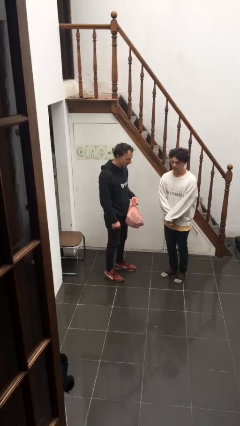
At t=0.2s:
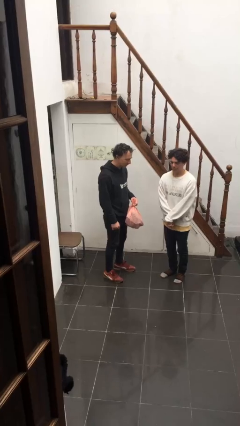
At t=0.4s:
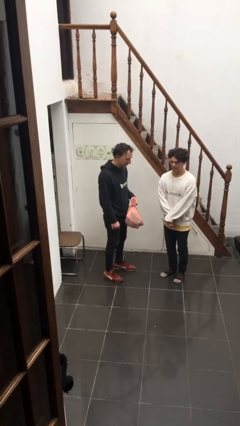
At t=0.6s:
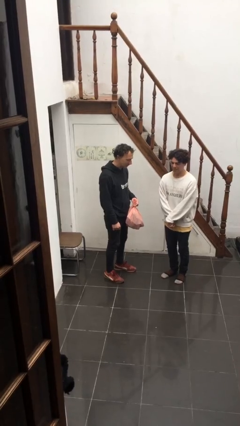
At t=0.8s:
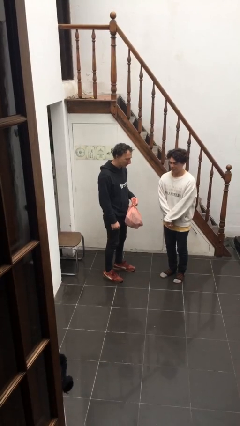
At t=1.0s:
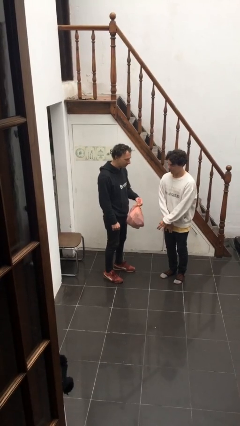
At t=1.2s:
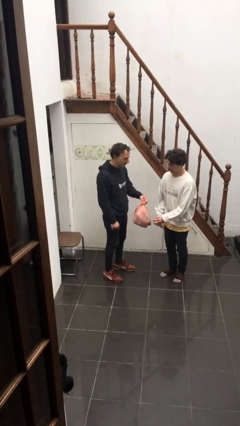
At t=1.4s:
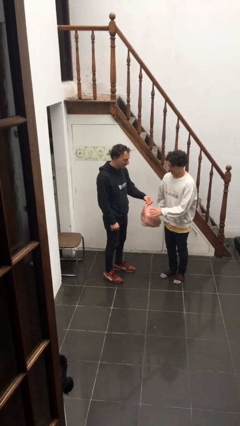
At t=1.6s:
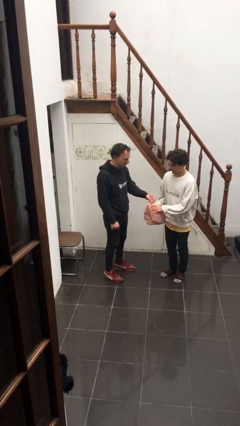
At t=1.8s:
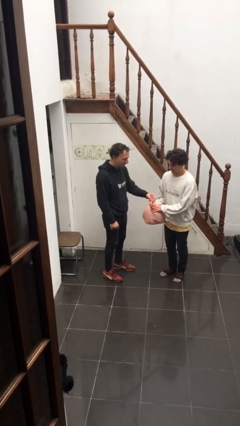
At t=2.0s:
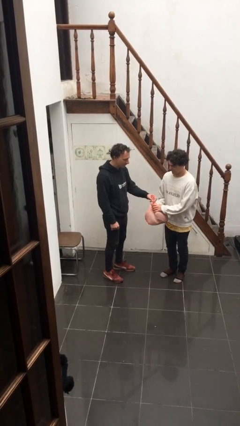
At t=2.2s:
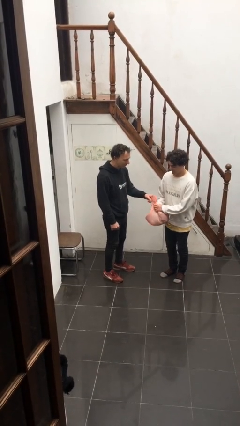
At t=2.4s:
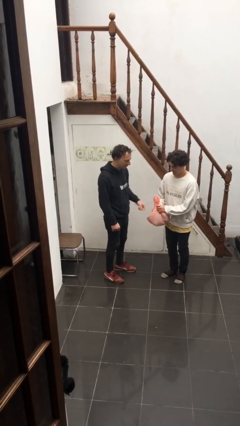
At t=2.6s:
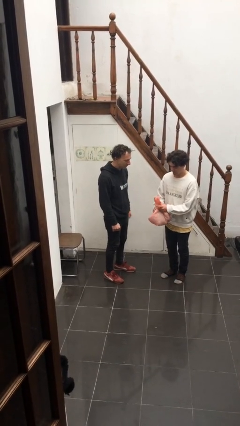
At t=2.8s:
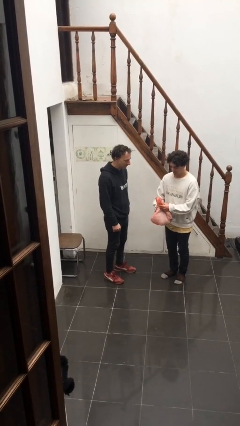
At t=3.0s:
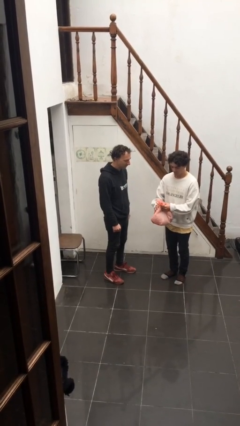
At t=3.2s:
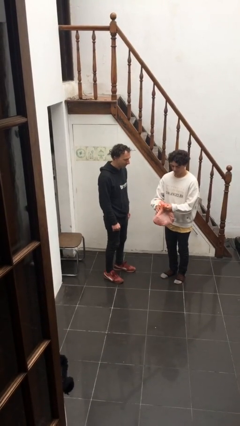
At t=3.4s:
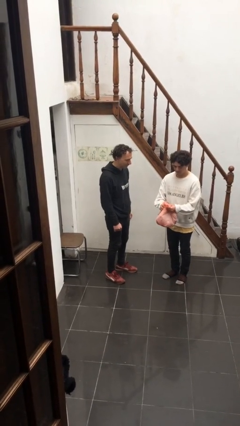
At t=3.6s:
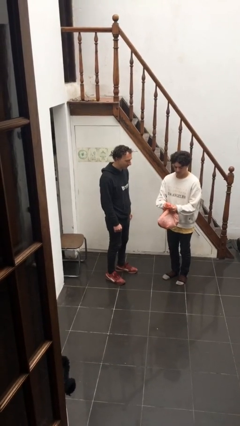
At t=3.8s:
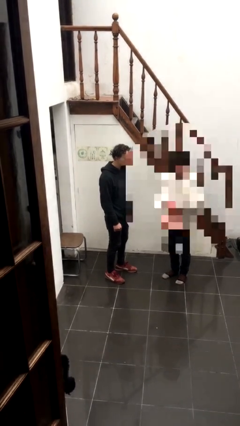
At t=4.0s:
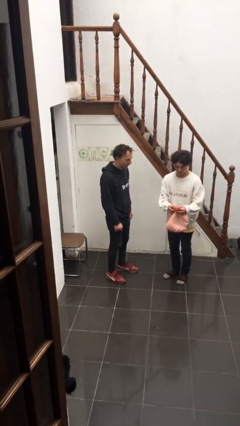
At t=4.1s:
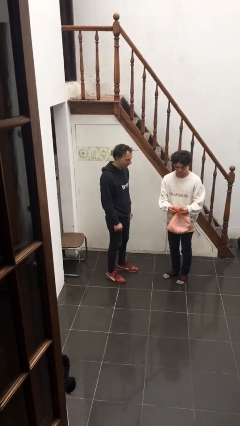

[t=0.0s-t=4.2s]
person transfers object to person

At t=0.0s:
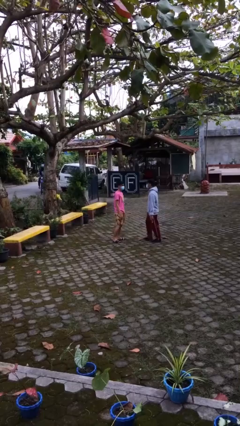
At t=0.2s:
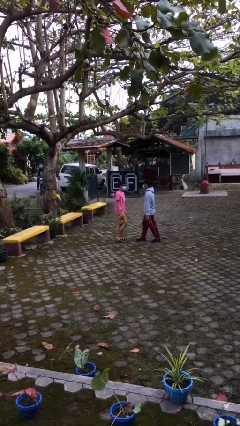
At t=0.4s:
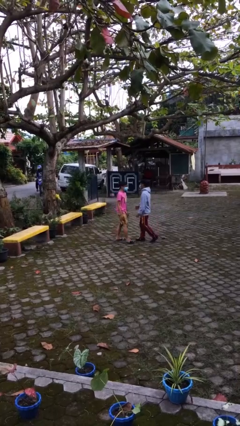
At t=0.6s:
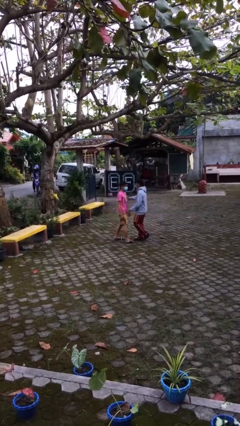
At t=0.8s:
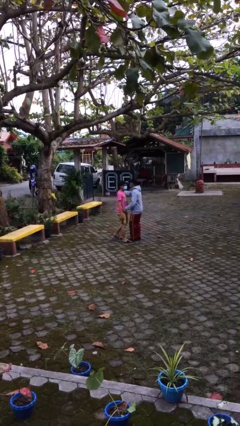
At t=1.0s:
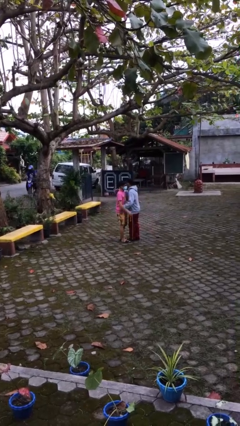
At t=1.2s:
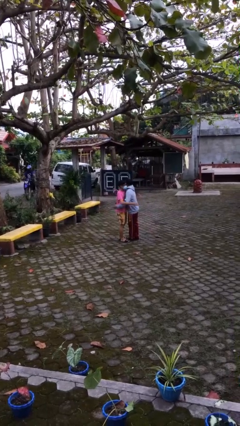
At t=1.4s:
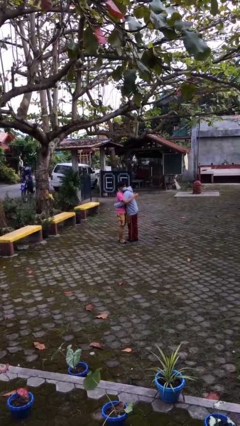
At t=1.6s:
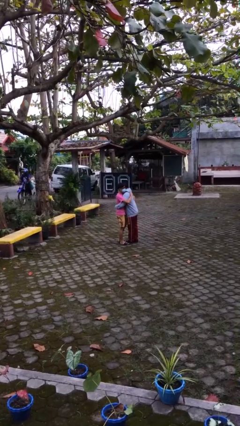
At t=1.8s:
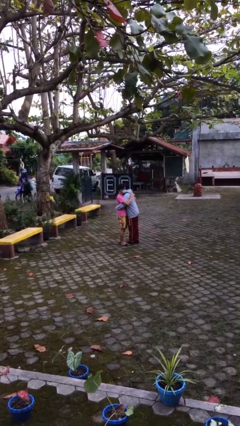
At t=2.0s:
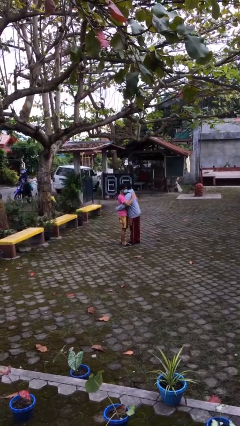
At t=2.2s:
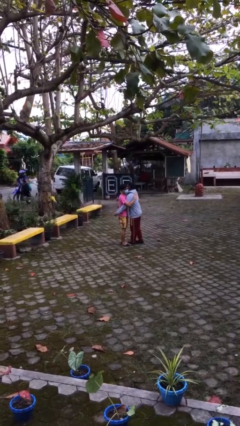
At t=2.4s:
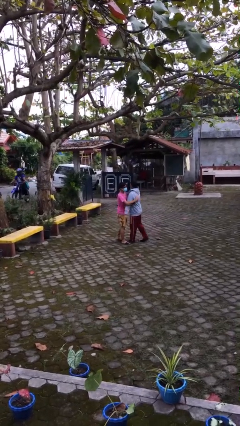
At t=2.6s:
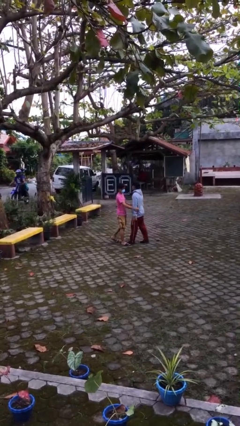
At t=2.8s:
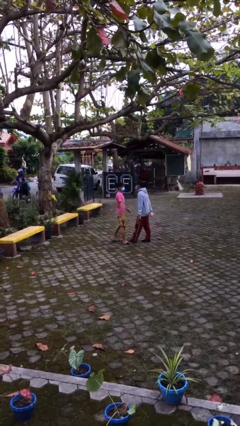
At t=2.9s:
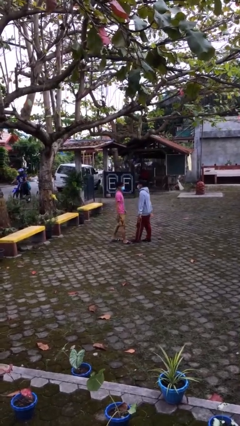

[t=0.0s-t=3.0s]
person embraces person

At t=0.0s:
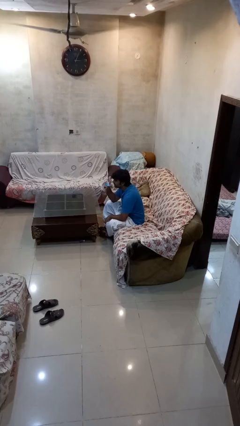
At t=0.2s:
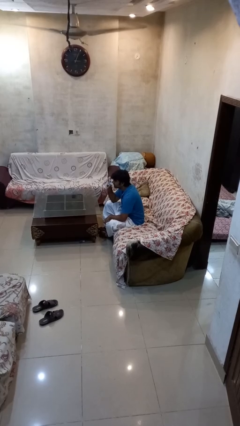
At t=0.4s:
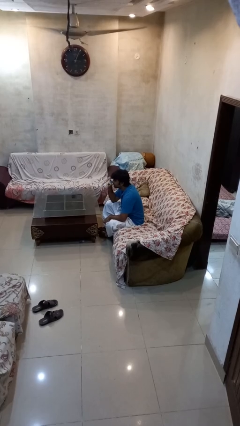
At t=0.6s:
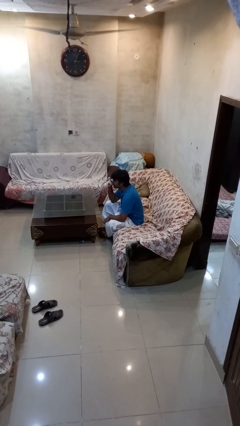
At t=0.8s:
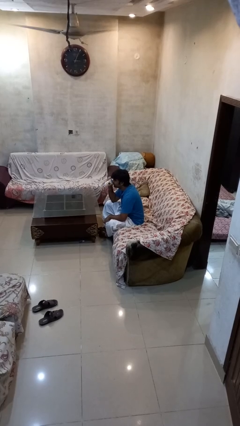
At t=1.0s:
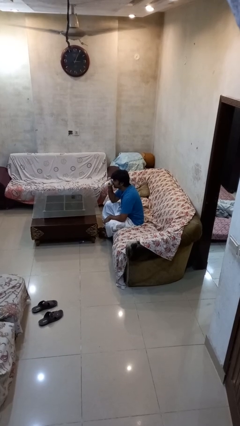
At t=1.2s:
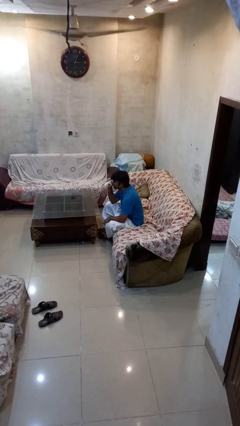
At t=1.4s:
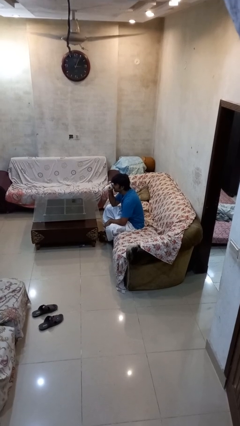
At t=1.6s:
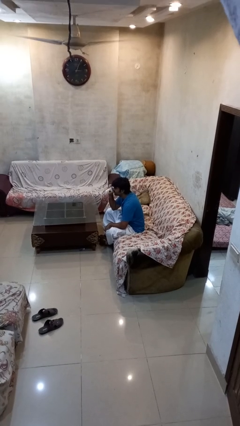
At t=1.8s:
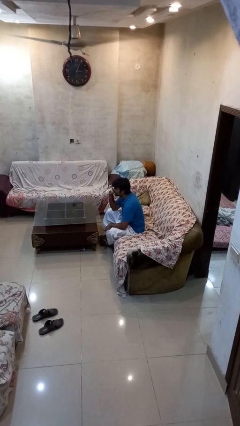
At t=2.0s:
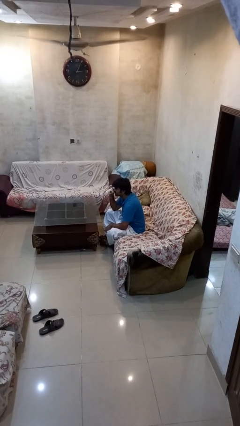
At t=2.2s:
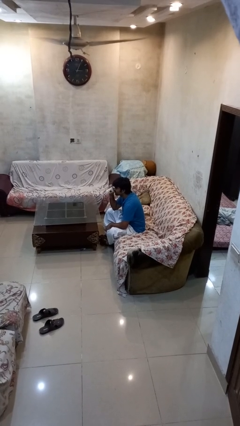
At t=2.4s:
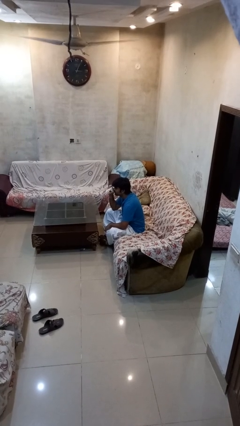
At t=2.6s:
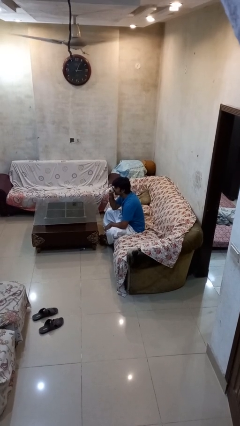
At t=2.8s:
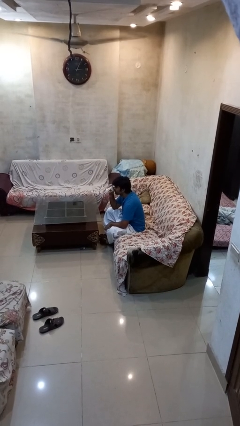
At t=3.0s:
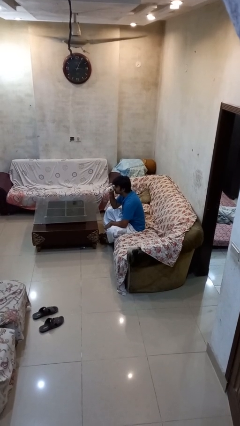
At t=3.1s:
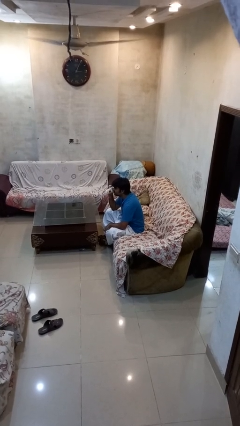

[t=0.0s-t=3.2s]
person drinks from mug

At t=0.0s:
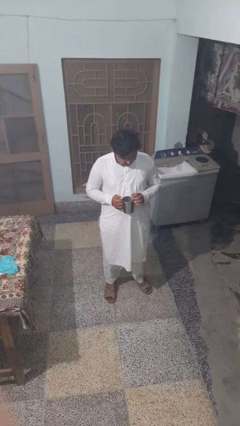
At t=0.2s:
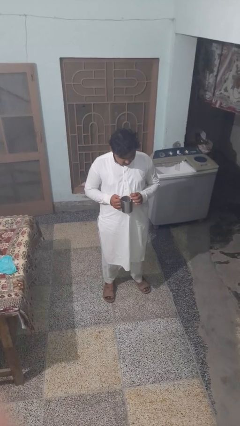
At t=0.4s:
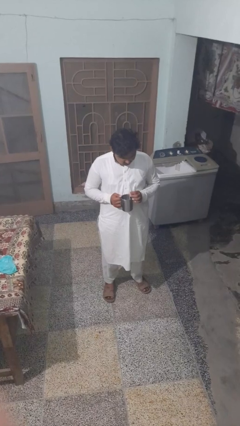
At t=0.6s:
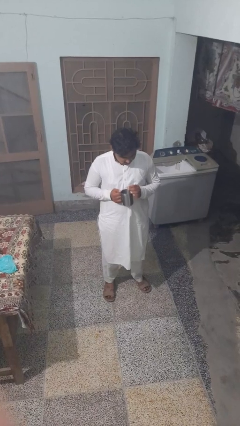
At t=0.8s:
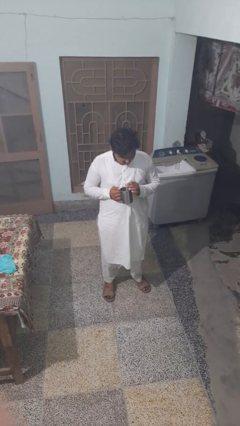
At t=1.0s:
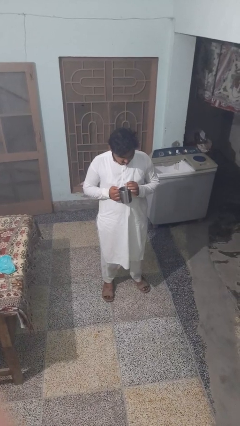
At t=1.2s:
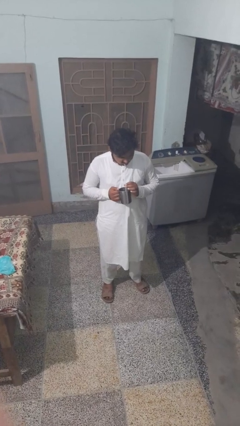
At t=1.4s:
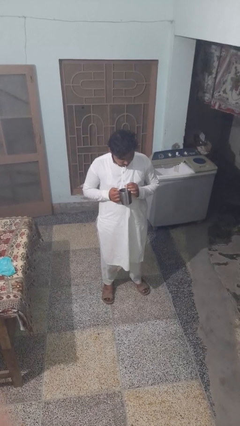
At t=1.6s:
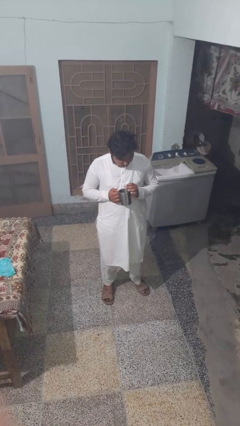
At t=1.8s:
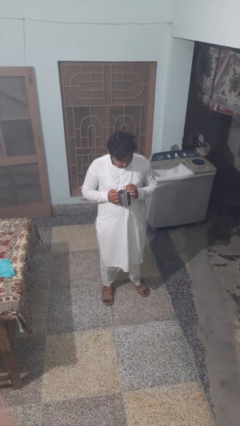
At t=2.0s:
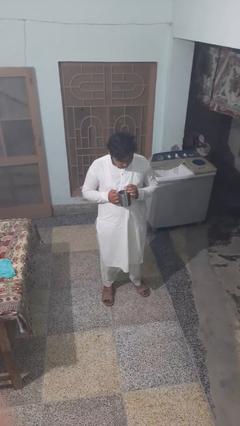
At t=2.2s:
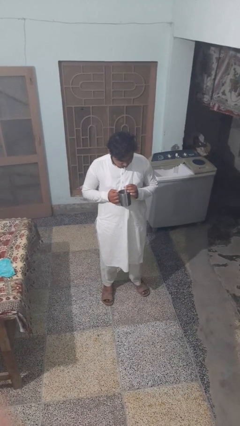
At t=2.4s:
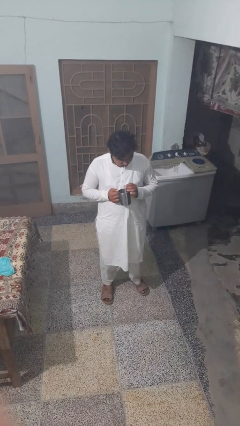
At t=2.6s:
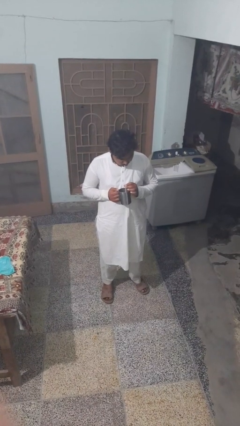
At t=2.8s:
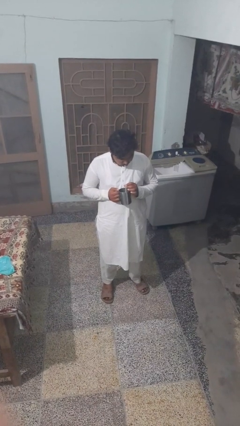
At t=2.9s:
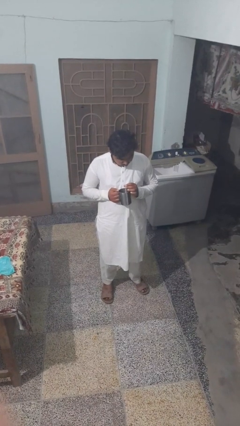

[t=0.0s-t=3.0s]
person drinks from straw

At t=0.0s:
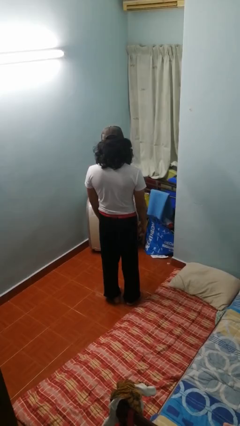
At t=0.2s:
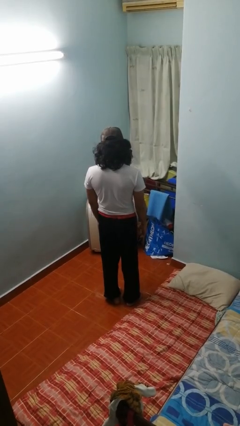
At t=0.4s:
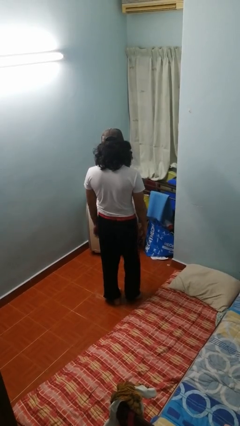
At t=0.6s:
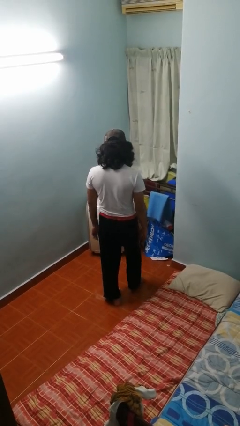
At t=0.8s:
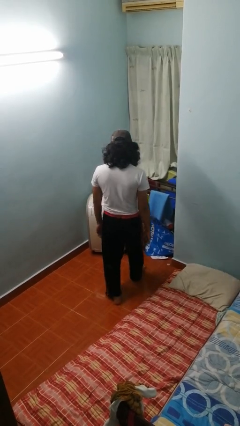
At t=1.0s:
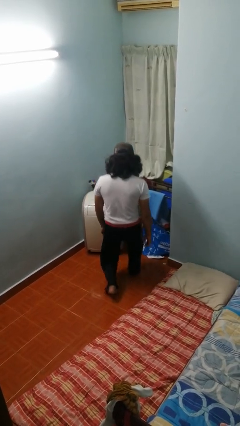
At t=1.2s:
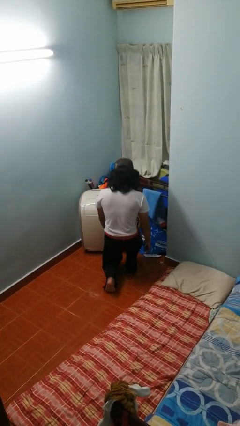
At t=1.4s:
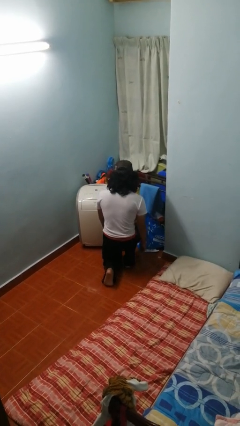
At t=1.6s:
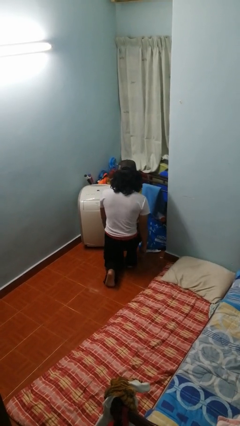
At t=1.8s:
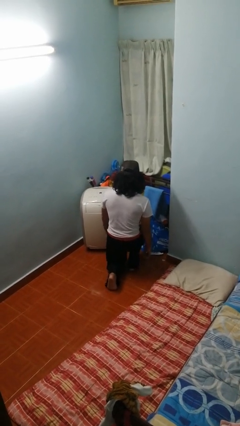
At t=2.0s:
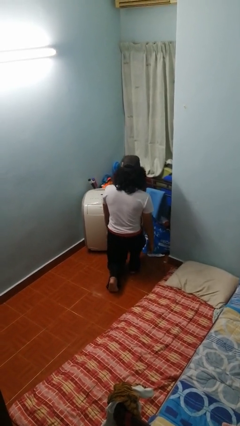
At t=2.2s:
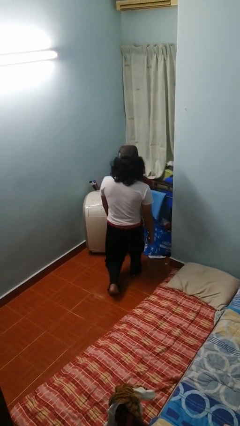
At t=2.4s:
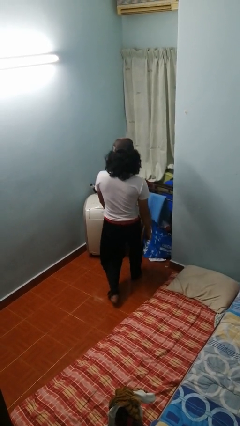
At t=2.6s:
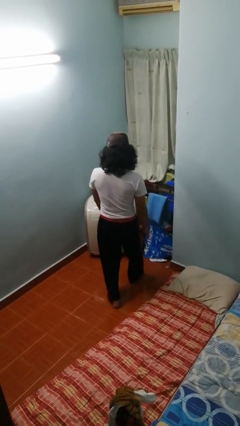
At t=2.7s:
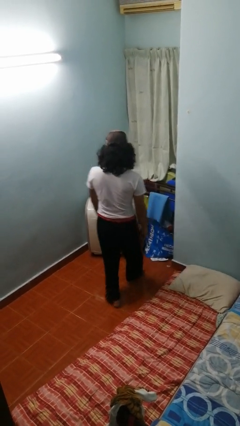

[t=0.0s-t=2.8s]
person exercises with lunges

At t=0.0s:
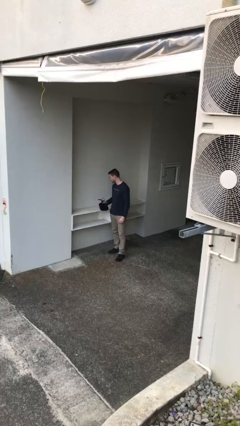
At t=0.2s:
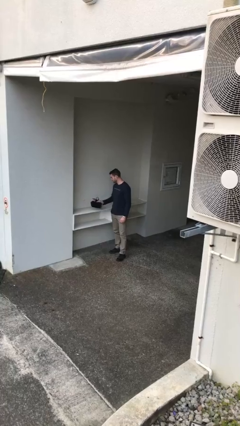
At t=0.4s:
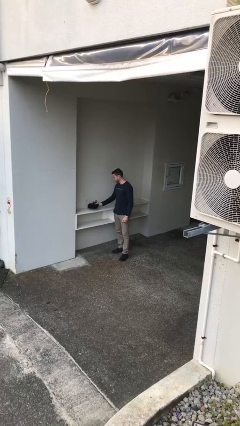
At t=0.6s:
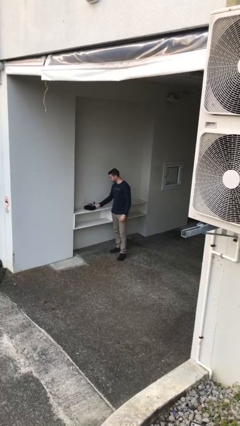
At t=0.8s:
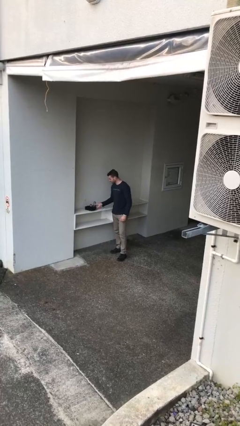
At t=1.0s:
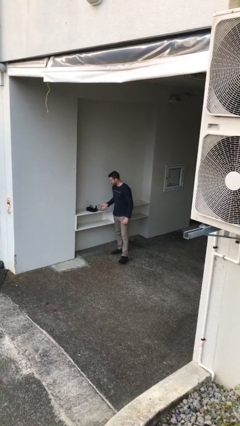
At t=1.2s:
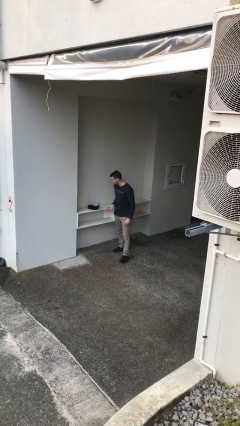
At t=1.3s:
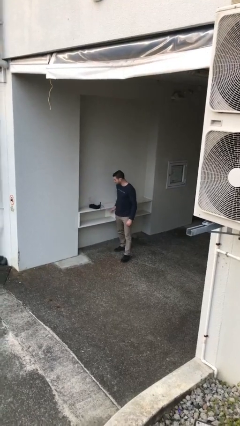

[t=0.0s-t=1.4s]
person puts down object on table
